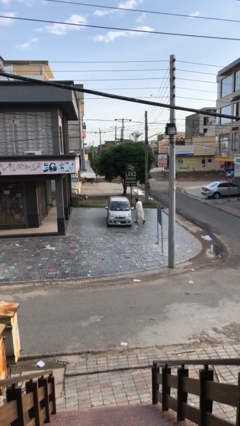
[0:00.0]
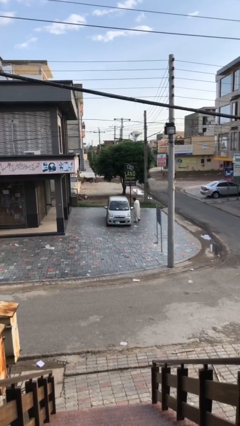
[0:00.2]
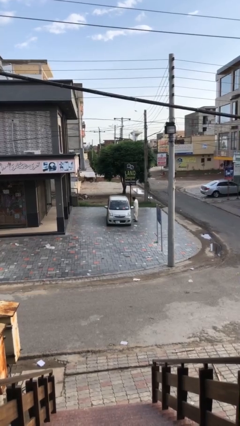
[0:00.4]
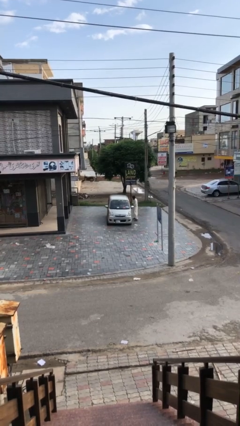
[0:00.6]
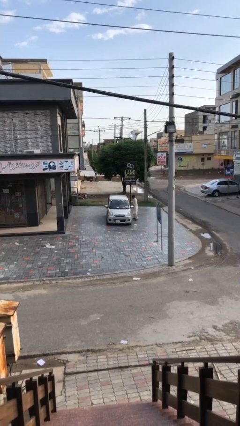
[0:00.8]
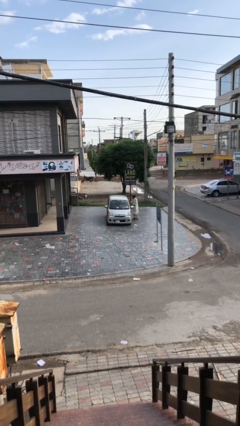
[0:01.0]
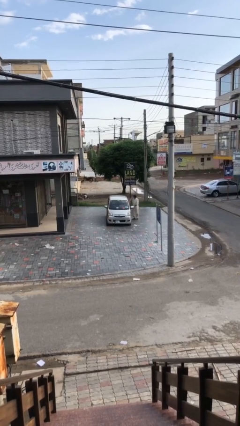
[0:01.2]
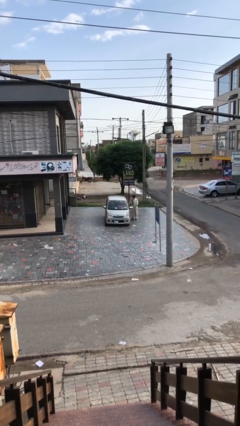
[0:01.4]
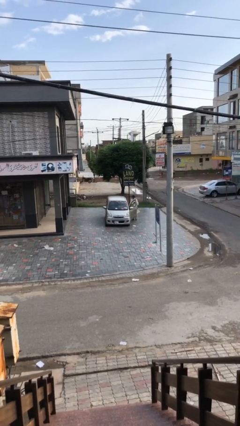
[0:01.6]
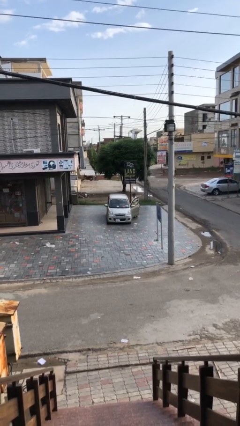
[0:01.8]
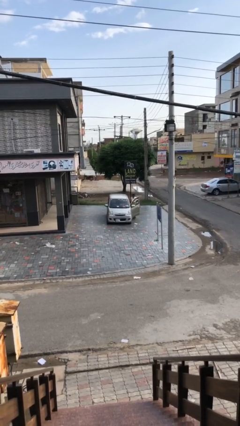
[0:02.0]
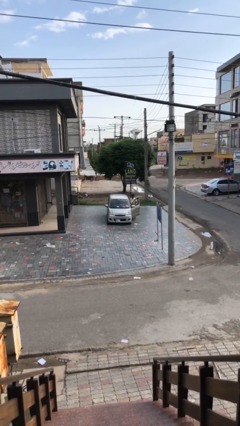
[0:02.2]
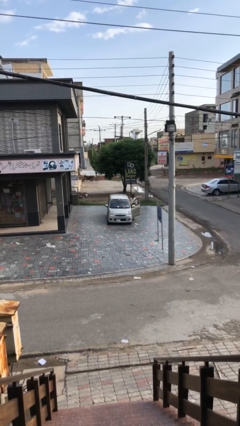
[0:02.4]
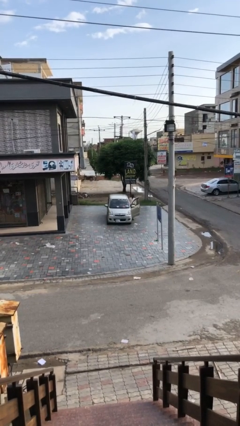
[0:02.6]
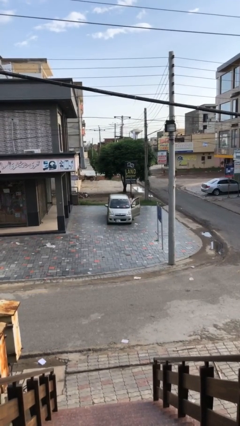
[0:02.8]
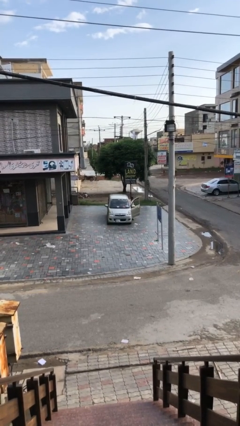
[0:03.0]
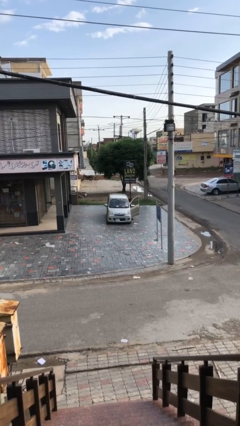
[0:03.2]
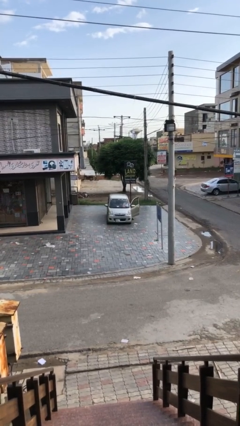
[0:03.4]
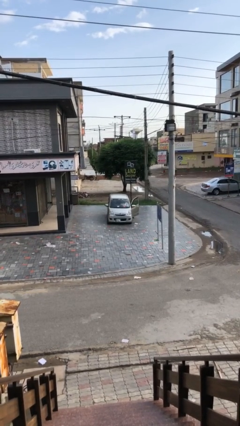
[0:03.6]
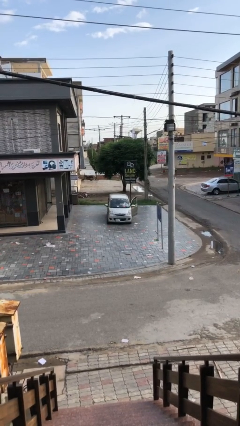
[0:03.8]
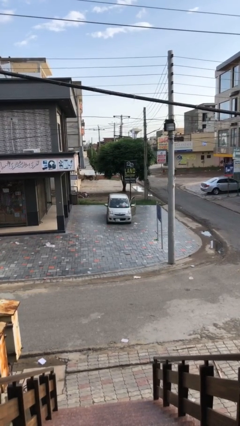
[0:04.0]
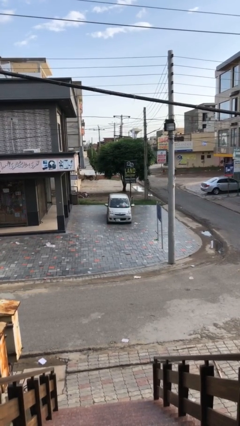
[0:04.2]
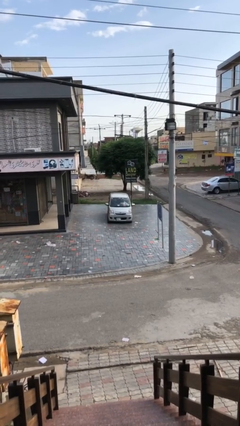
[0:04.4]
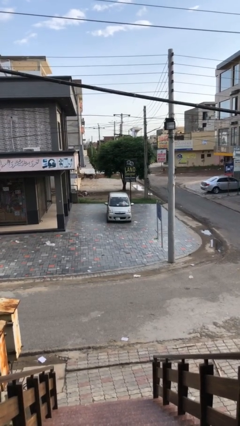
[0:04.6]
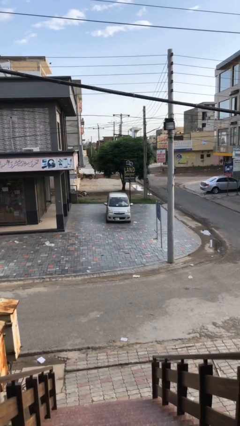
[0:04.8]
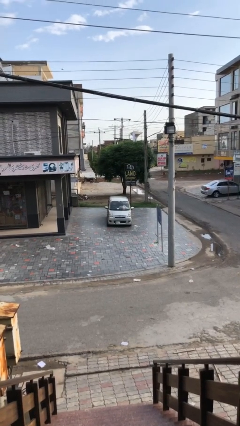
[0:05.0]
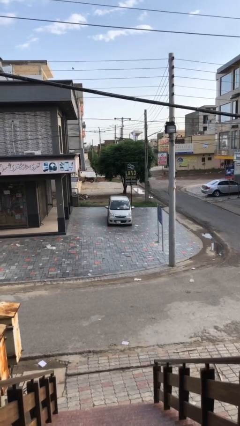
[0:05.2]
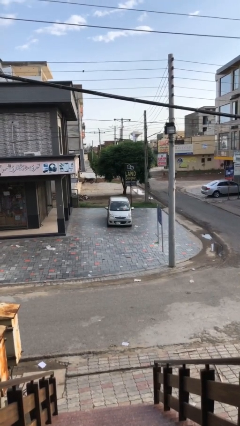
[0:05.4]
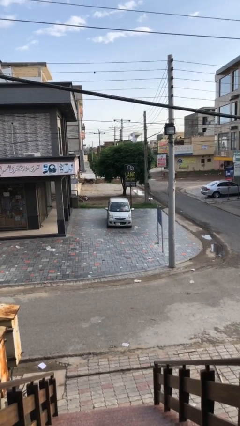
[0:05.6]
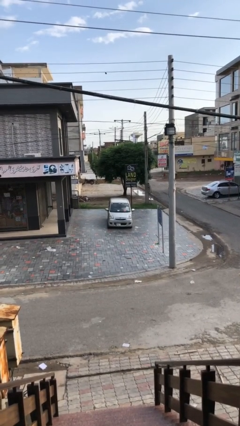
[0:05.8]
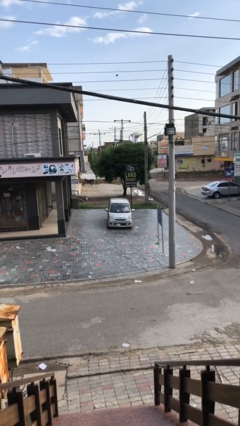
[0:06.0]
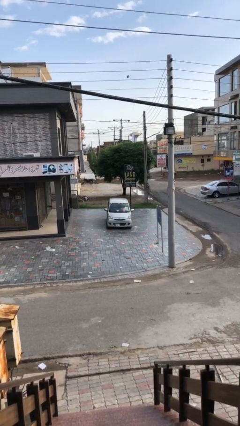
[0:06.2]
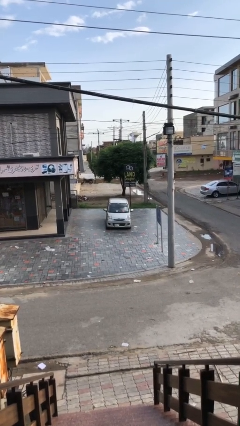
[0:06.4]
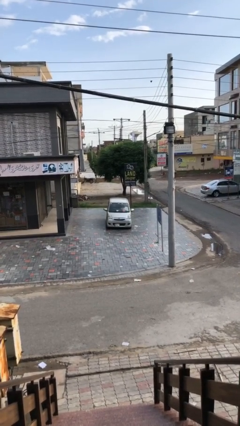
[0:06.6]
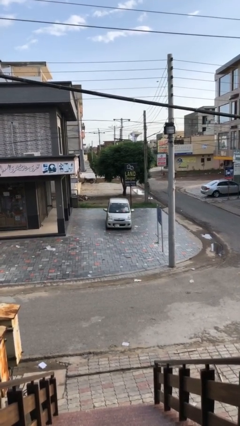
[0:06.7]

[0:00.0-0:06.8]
car picks up person

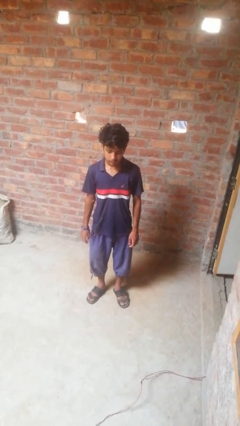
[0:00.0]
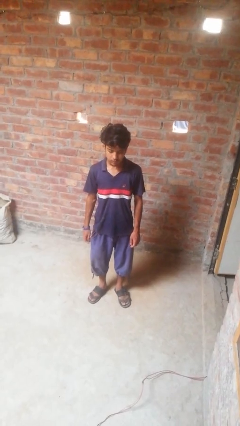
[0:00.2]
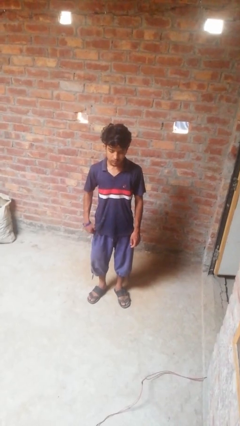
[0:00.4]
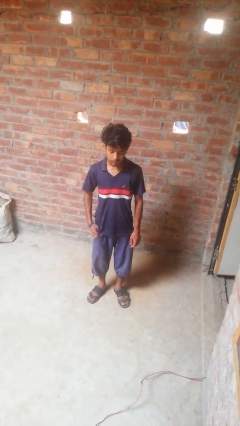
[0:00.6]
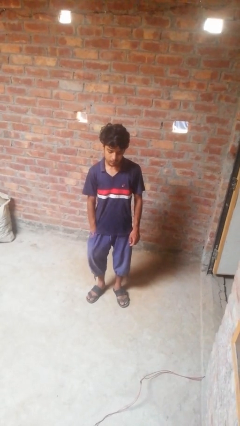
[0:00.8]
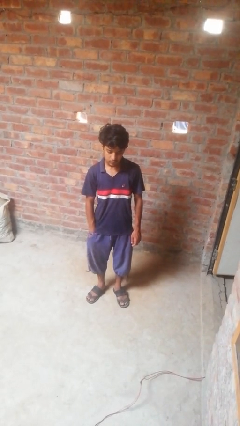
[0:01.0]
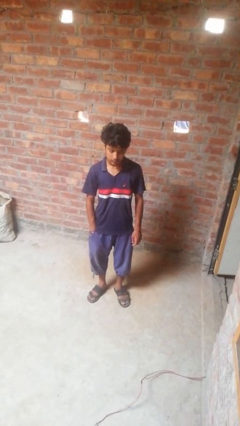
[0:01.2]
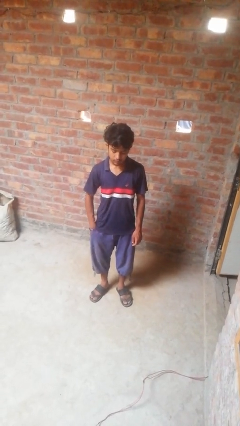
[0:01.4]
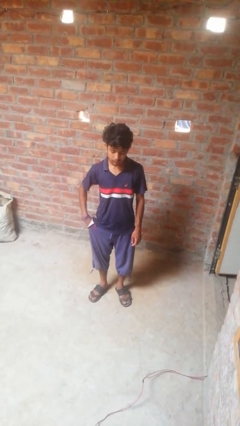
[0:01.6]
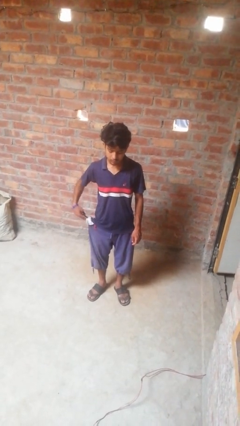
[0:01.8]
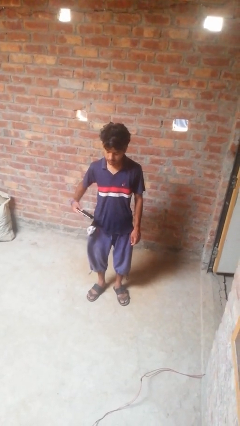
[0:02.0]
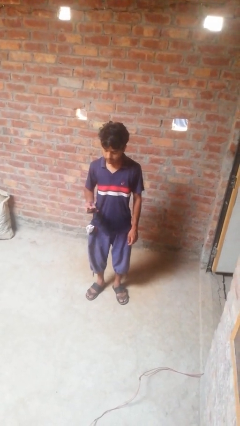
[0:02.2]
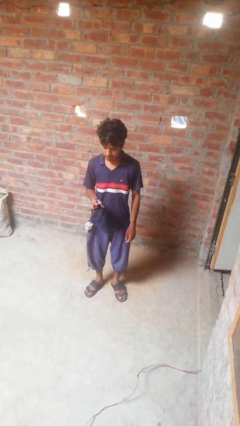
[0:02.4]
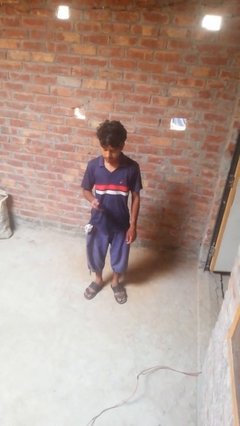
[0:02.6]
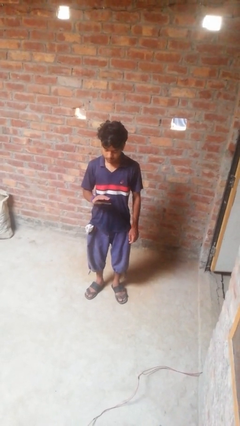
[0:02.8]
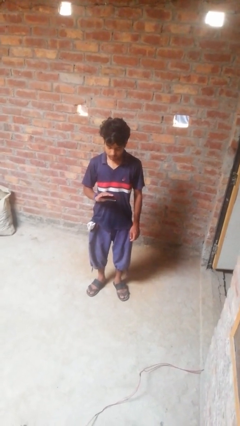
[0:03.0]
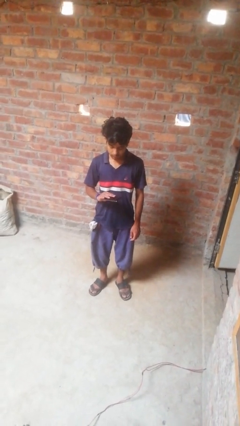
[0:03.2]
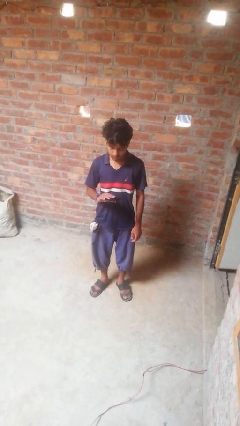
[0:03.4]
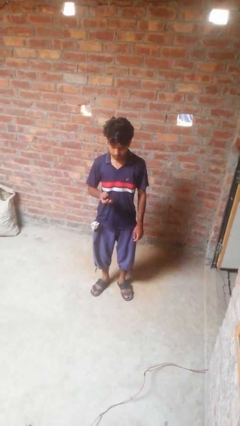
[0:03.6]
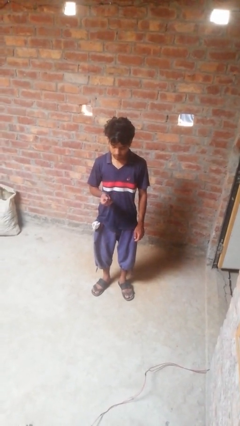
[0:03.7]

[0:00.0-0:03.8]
person takes phone from pocket

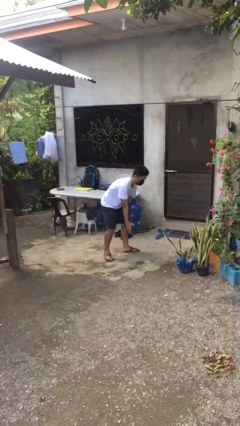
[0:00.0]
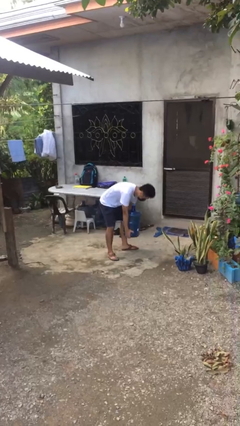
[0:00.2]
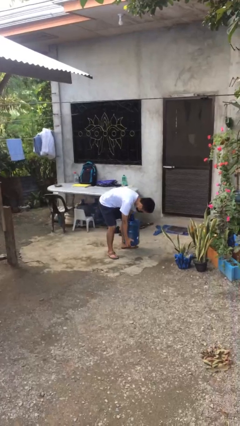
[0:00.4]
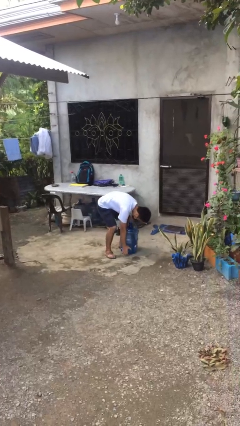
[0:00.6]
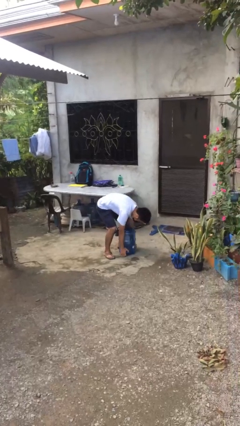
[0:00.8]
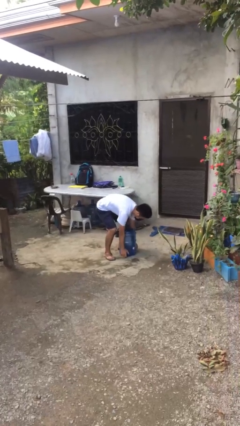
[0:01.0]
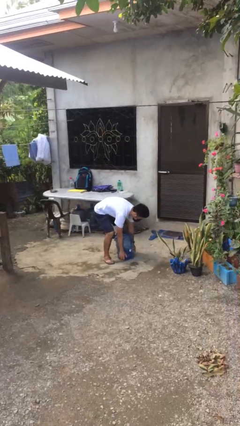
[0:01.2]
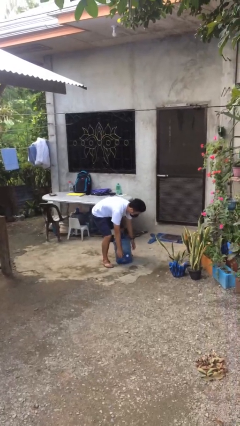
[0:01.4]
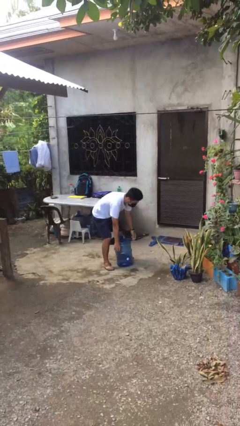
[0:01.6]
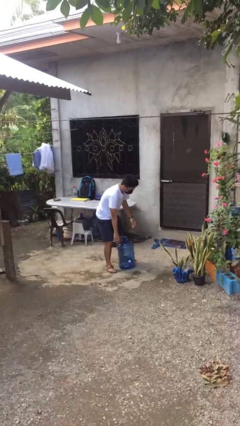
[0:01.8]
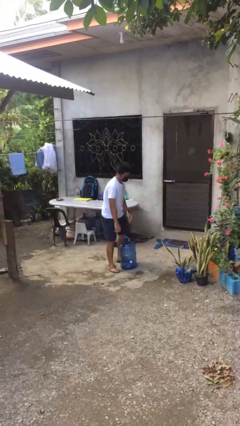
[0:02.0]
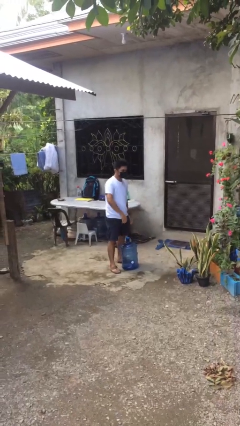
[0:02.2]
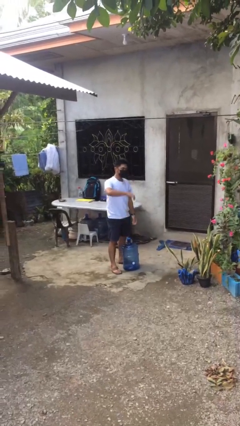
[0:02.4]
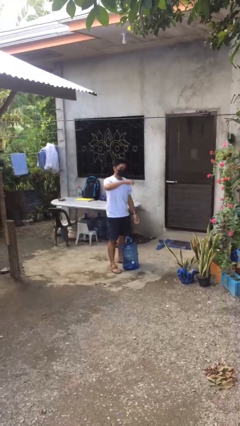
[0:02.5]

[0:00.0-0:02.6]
person puts down object on floor

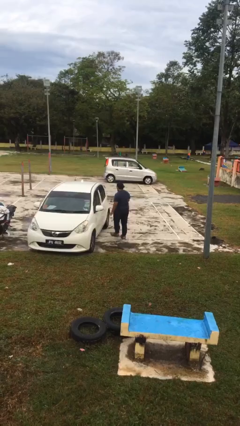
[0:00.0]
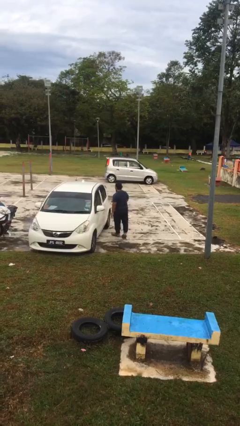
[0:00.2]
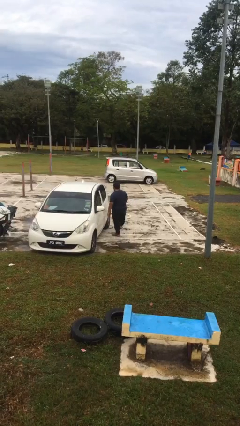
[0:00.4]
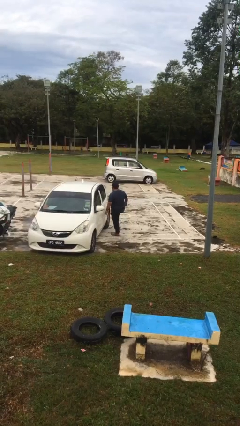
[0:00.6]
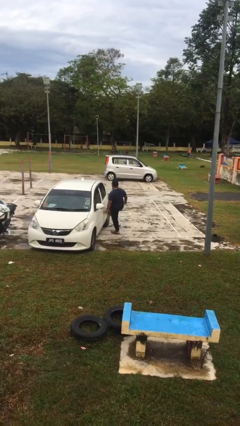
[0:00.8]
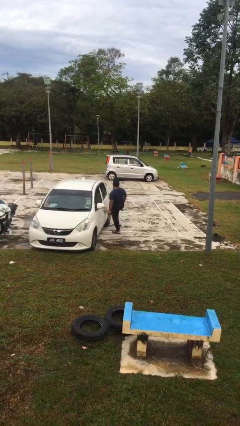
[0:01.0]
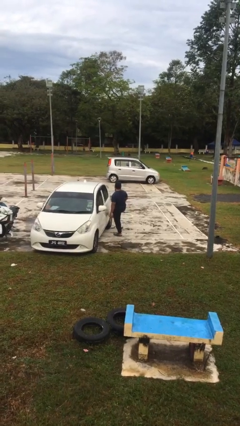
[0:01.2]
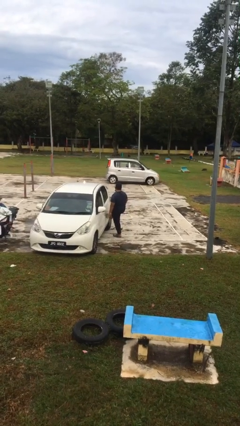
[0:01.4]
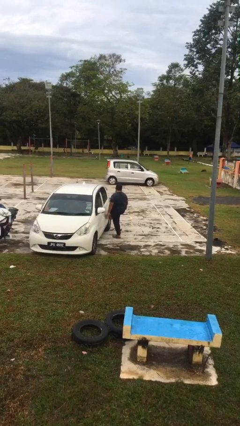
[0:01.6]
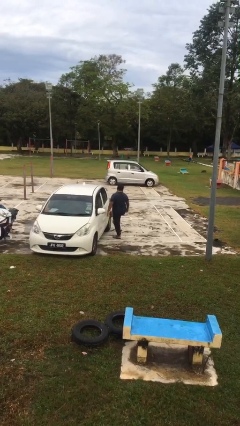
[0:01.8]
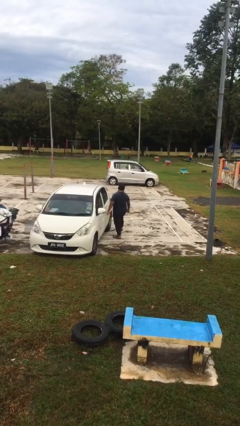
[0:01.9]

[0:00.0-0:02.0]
person kicks car tires

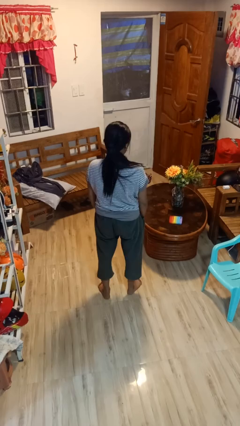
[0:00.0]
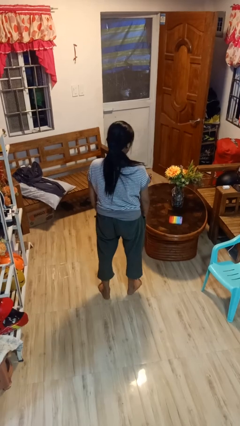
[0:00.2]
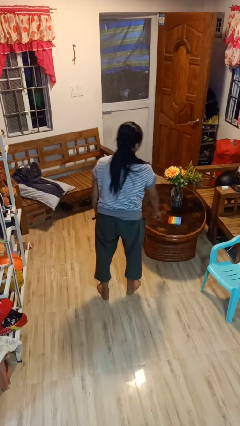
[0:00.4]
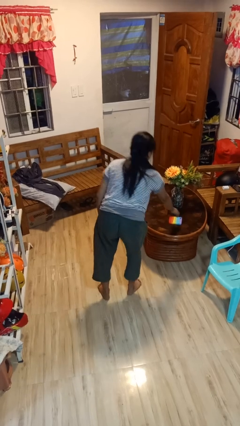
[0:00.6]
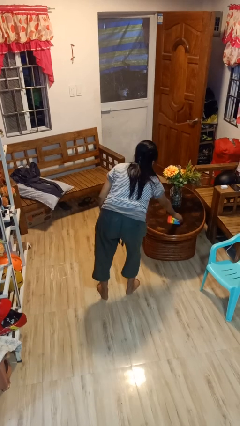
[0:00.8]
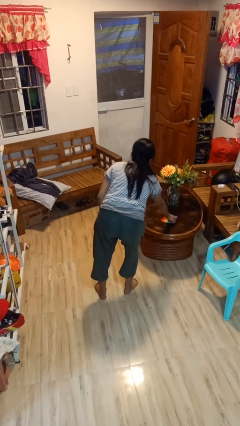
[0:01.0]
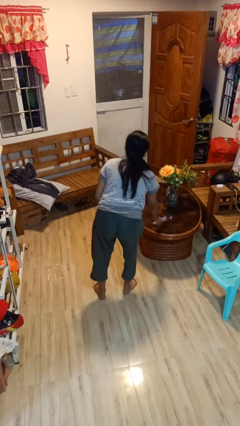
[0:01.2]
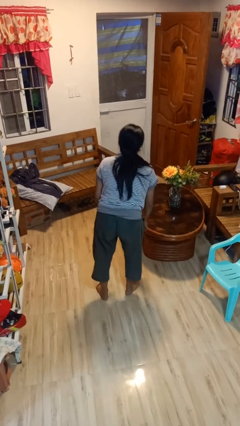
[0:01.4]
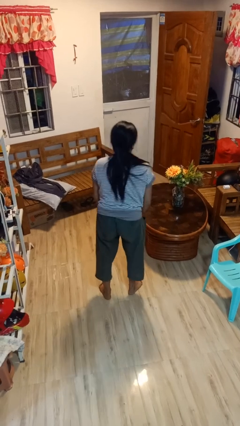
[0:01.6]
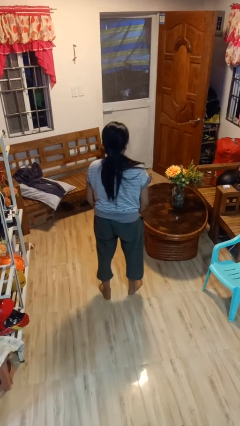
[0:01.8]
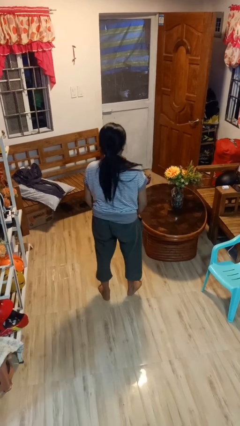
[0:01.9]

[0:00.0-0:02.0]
person picks up object from table

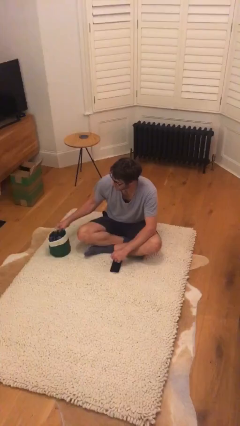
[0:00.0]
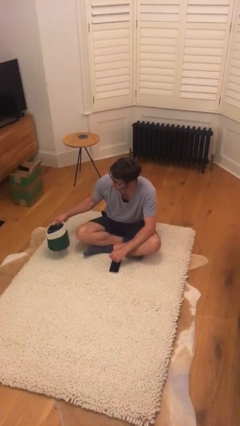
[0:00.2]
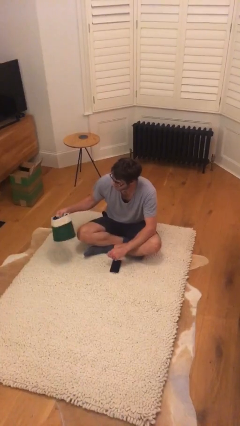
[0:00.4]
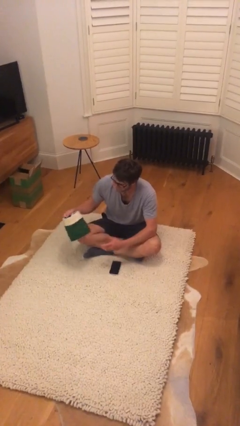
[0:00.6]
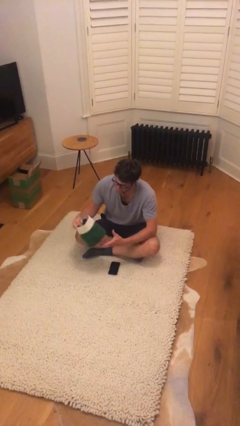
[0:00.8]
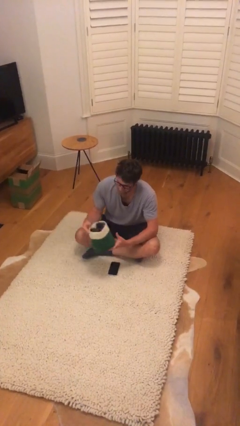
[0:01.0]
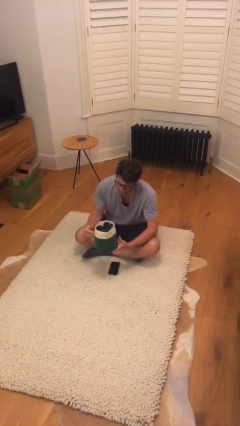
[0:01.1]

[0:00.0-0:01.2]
person picks up object from floor
